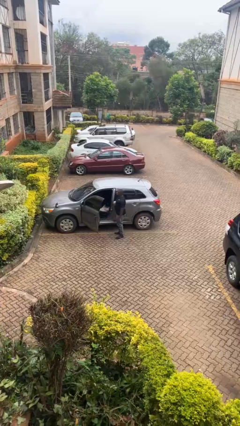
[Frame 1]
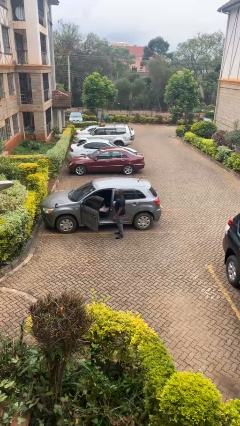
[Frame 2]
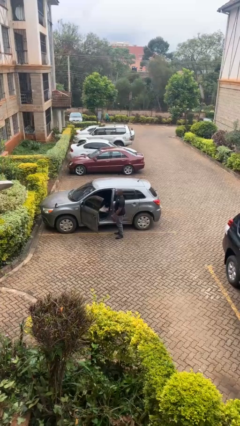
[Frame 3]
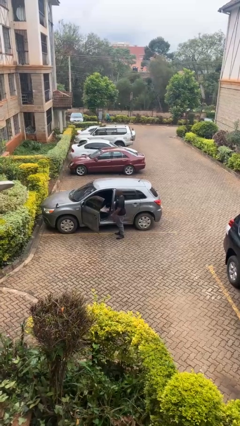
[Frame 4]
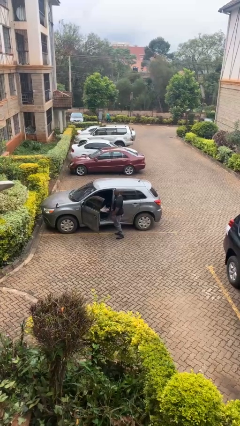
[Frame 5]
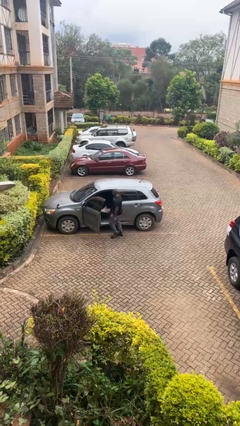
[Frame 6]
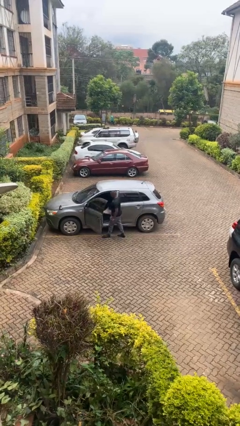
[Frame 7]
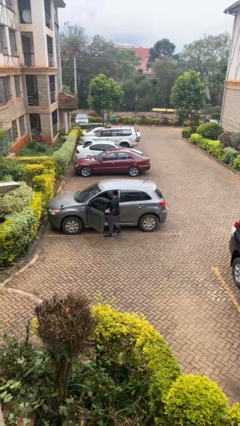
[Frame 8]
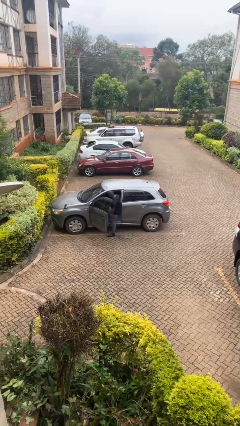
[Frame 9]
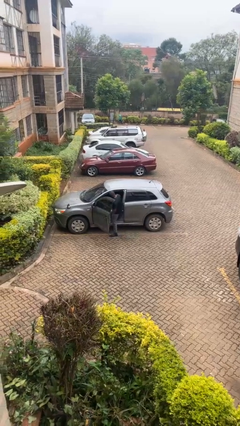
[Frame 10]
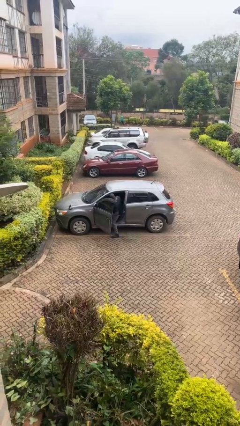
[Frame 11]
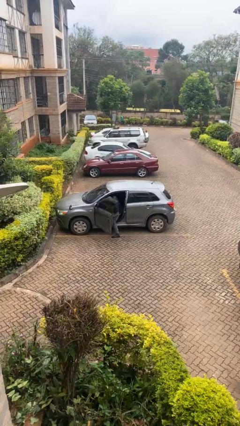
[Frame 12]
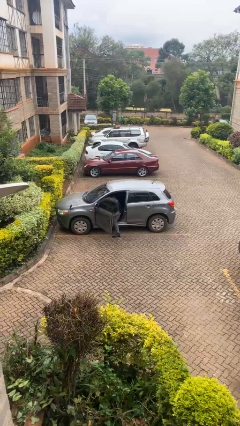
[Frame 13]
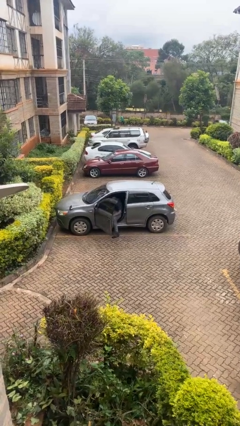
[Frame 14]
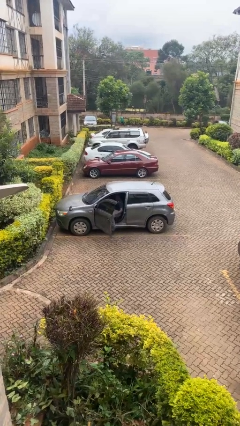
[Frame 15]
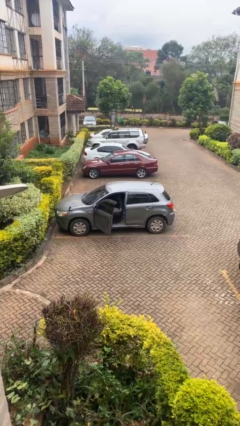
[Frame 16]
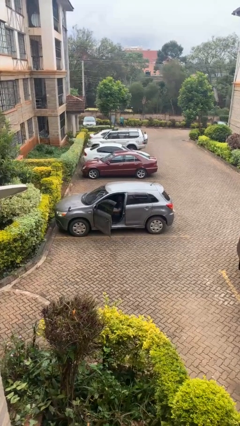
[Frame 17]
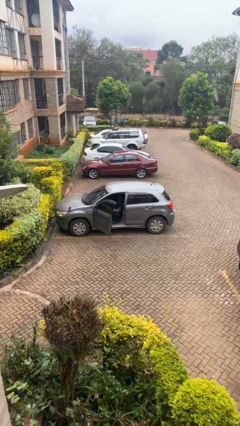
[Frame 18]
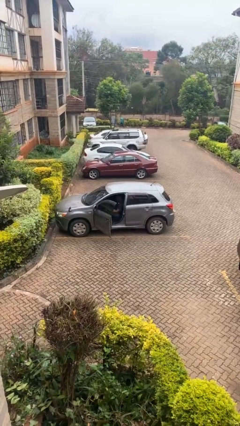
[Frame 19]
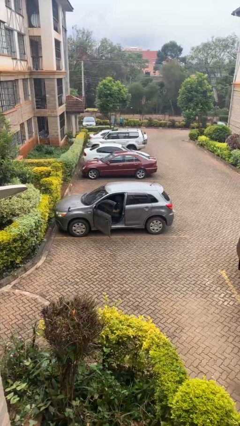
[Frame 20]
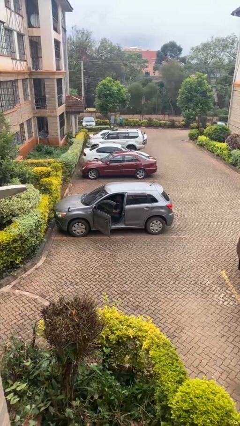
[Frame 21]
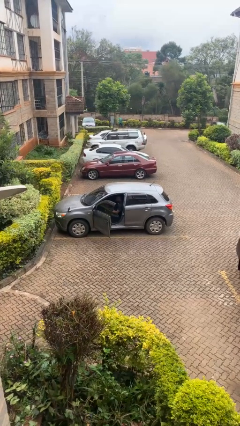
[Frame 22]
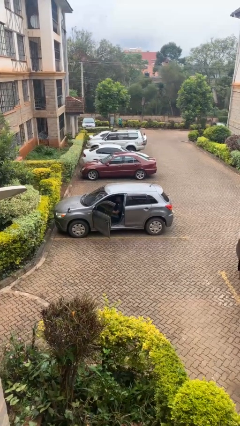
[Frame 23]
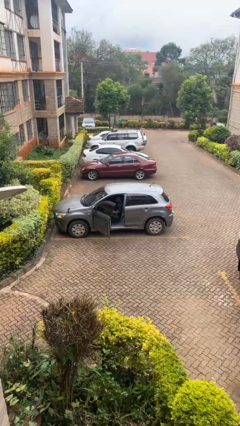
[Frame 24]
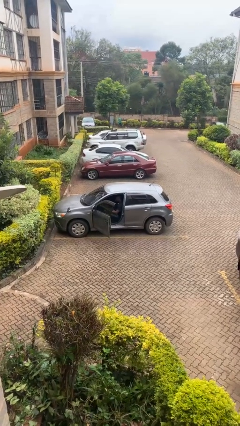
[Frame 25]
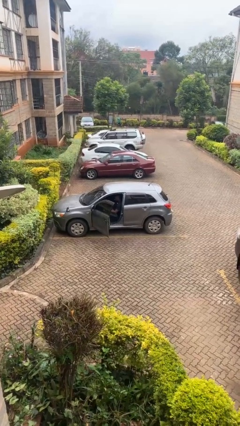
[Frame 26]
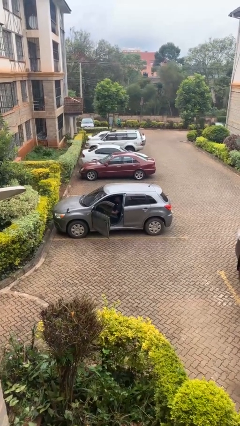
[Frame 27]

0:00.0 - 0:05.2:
person enters car

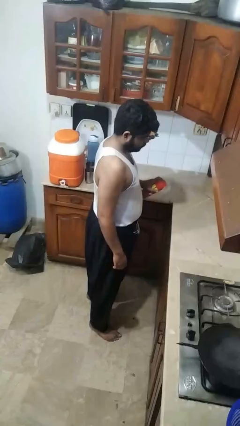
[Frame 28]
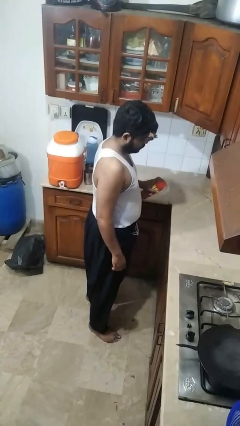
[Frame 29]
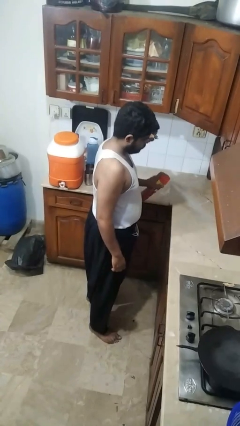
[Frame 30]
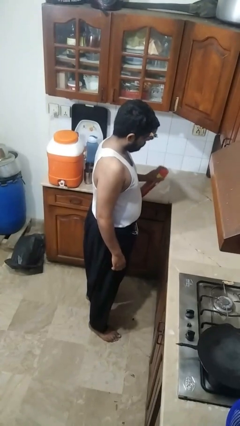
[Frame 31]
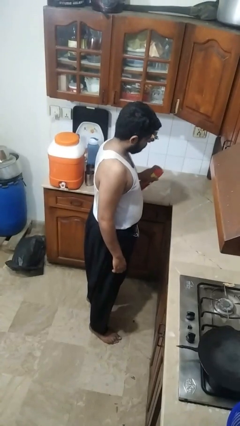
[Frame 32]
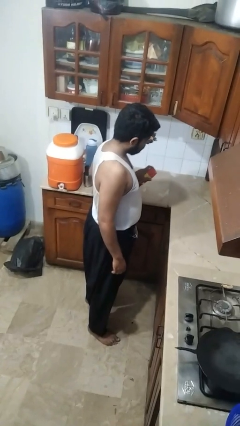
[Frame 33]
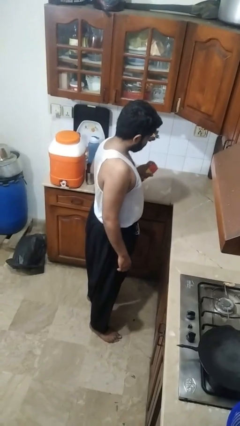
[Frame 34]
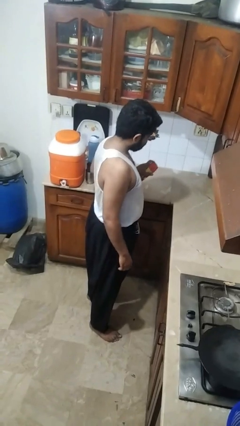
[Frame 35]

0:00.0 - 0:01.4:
person sprays from bottle

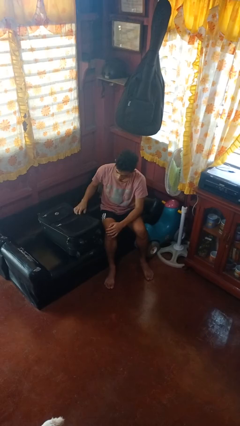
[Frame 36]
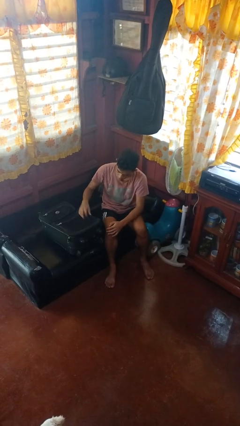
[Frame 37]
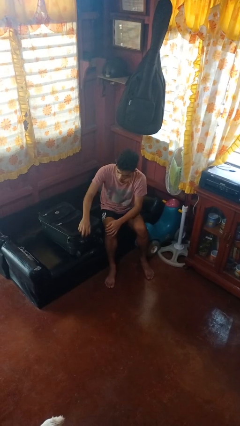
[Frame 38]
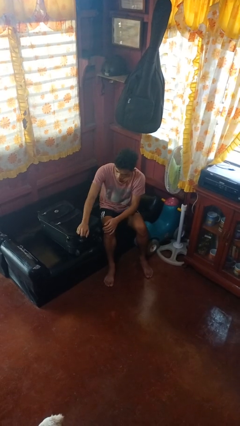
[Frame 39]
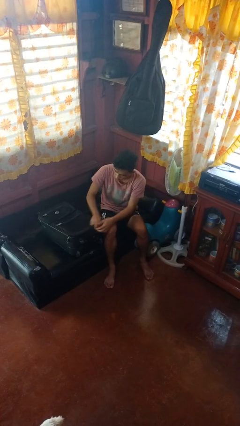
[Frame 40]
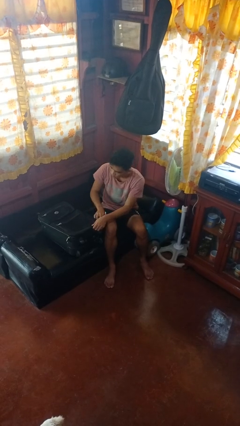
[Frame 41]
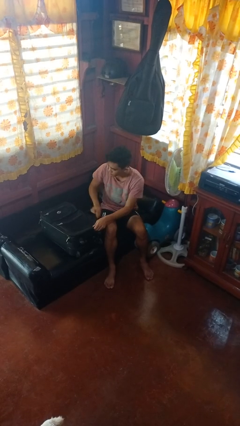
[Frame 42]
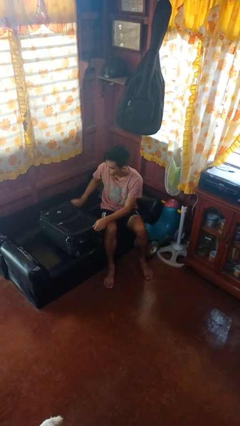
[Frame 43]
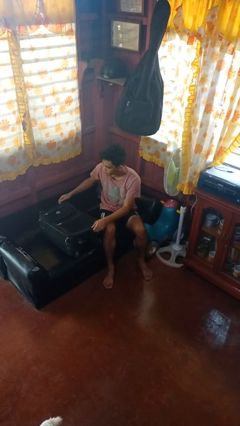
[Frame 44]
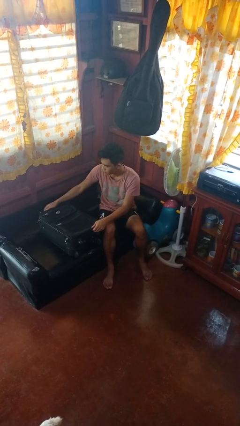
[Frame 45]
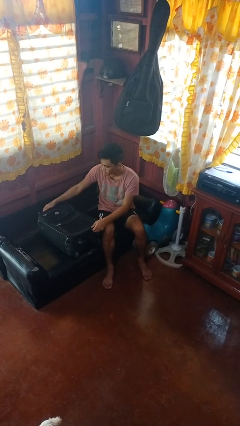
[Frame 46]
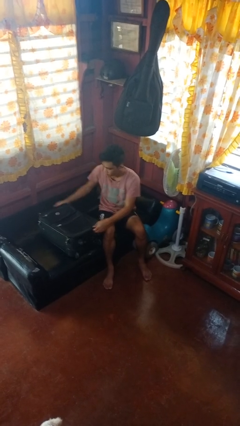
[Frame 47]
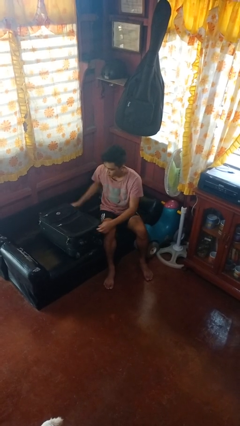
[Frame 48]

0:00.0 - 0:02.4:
person closes suitcase

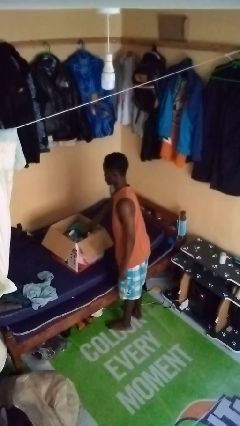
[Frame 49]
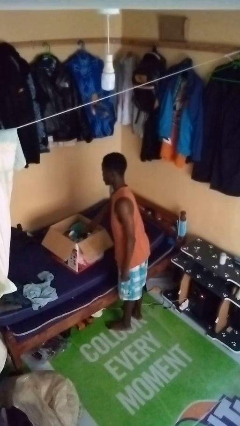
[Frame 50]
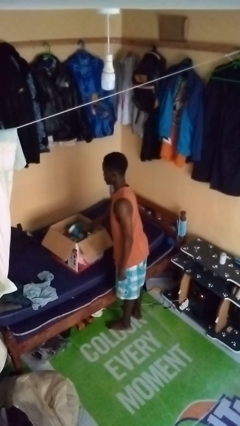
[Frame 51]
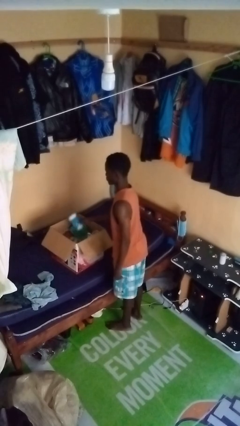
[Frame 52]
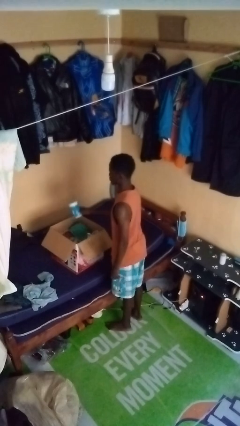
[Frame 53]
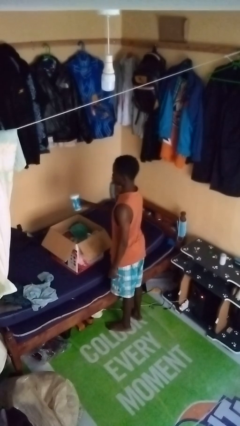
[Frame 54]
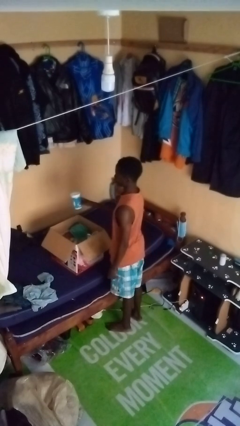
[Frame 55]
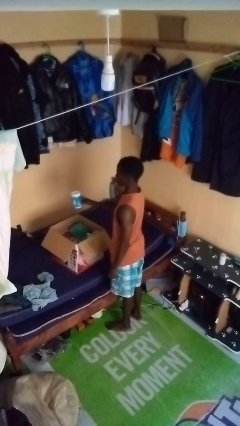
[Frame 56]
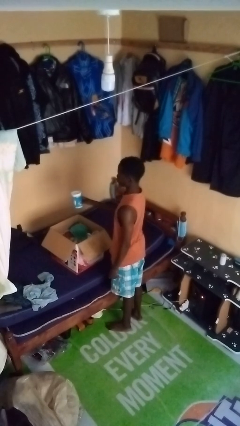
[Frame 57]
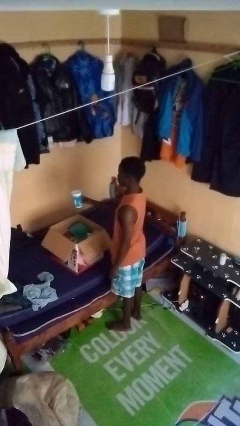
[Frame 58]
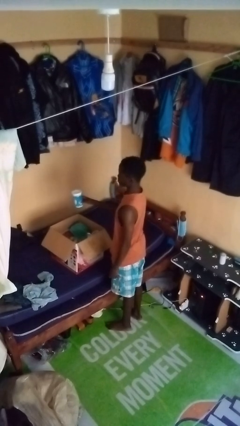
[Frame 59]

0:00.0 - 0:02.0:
person takes object from box

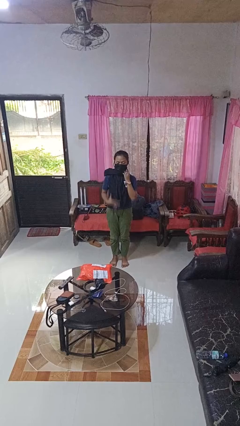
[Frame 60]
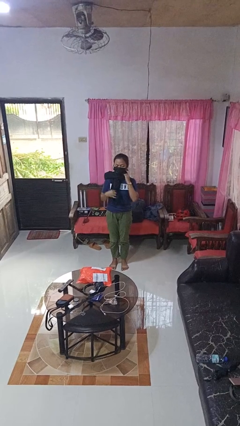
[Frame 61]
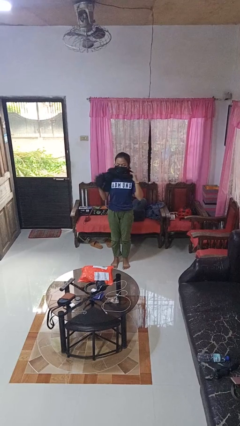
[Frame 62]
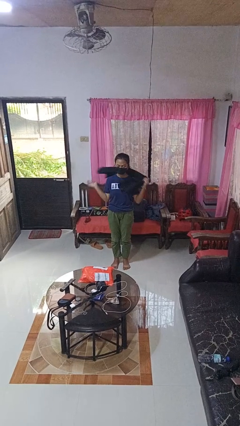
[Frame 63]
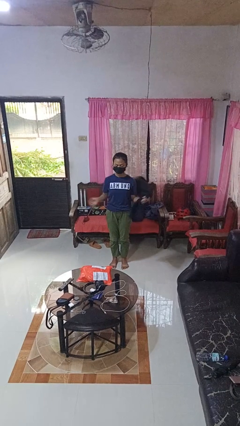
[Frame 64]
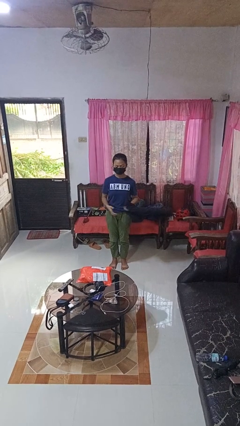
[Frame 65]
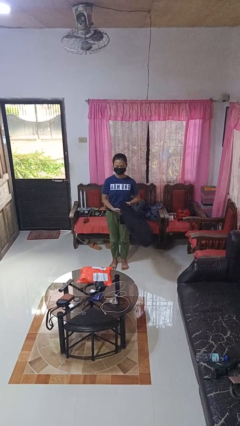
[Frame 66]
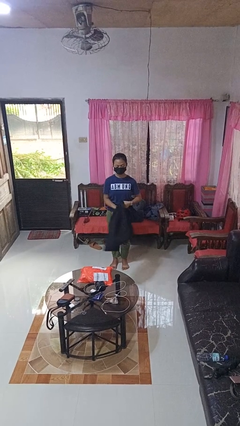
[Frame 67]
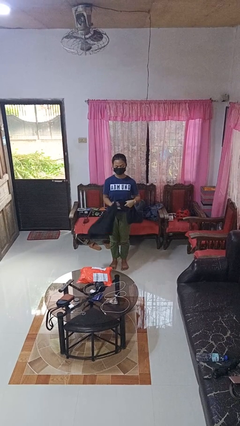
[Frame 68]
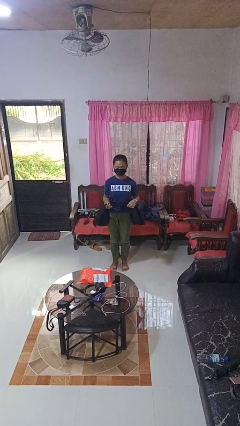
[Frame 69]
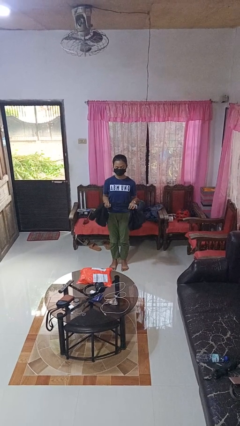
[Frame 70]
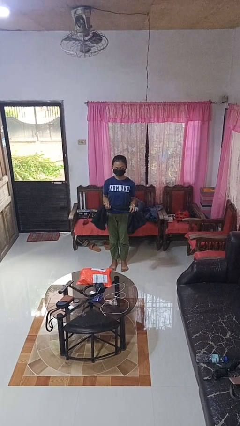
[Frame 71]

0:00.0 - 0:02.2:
person takes off scarf

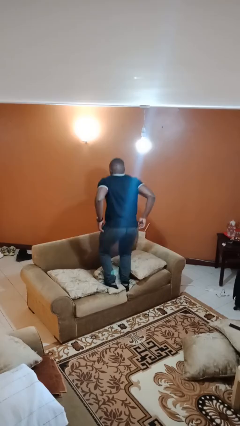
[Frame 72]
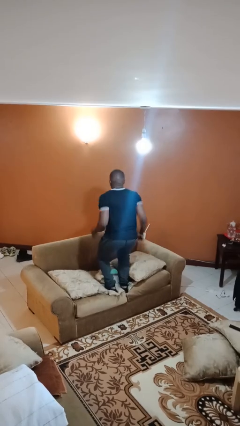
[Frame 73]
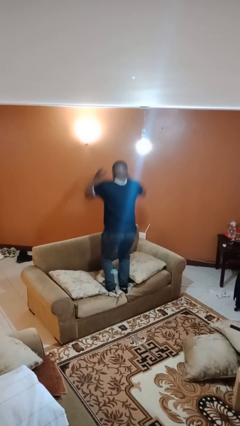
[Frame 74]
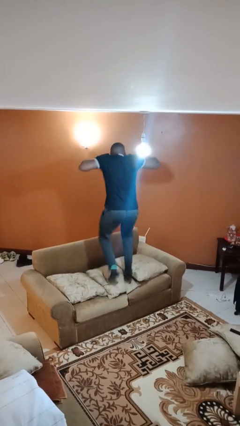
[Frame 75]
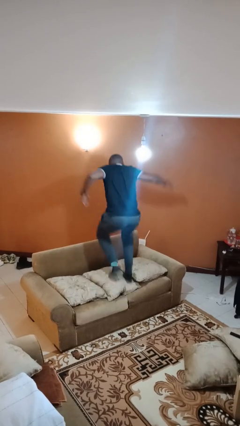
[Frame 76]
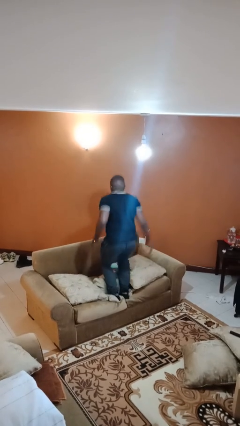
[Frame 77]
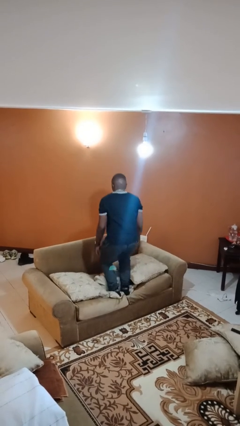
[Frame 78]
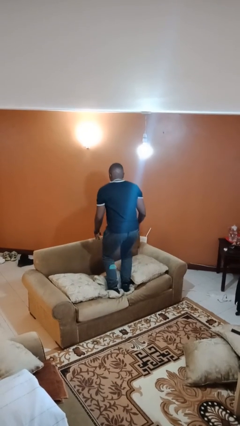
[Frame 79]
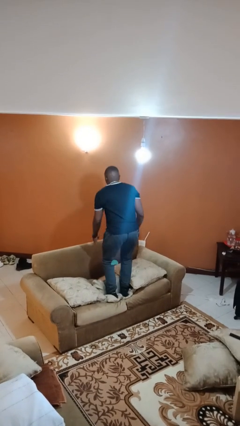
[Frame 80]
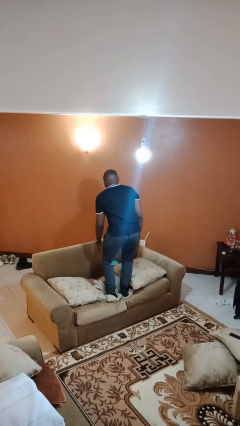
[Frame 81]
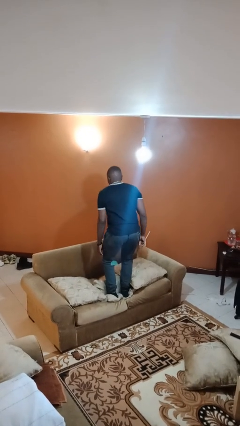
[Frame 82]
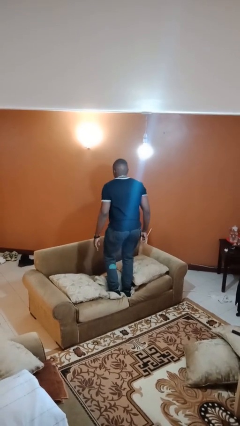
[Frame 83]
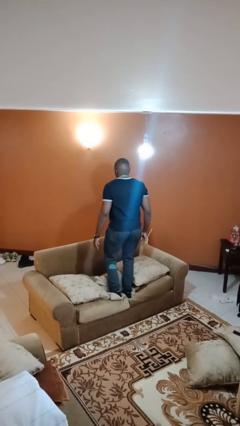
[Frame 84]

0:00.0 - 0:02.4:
person jumps on couch

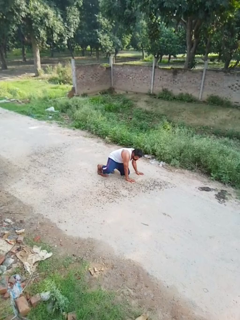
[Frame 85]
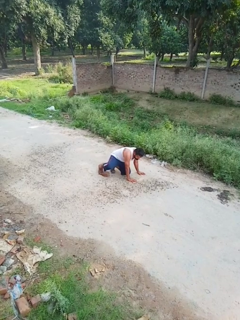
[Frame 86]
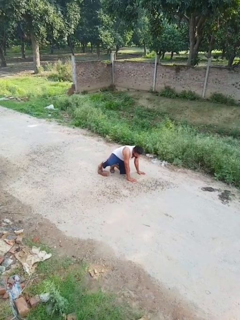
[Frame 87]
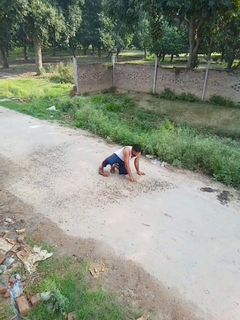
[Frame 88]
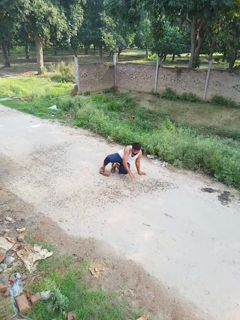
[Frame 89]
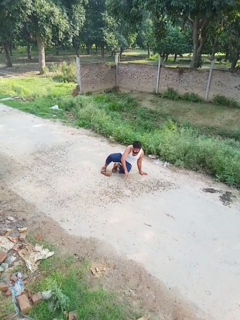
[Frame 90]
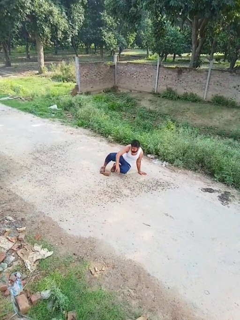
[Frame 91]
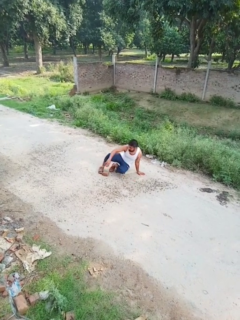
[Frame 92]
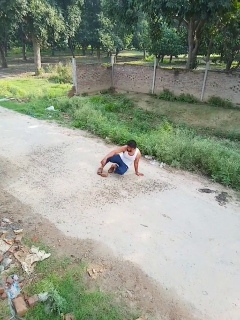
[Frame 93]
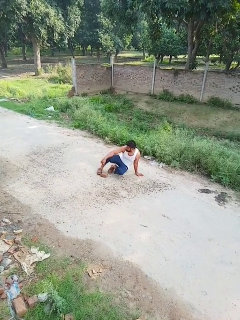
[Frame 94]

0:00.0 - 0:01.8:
person lies down on floor
